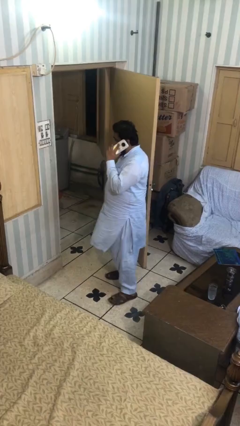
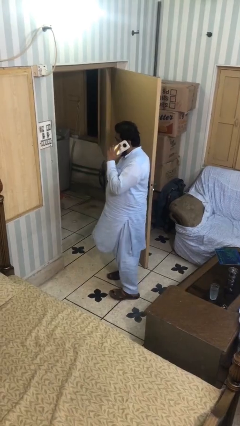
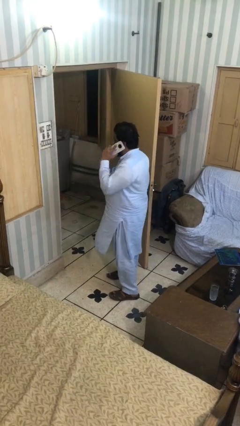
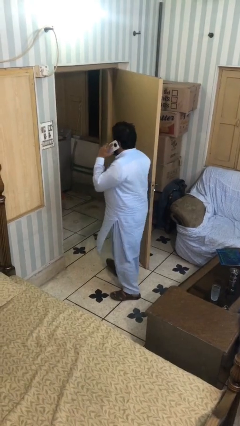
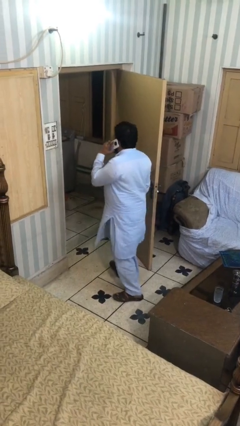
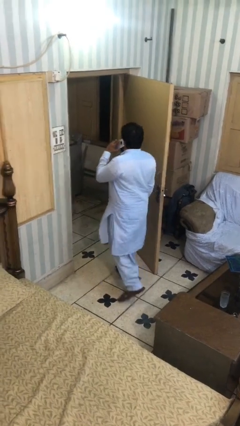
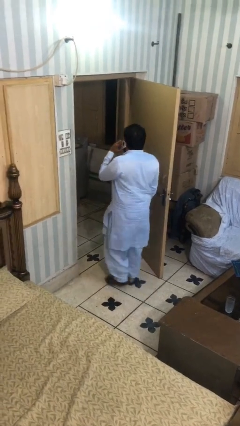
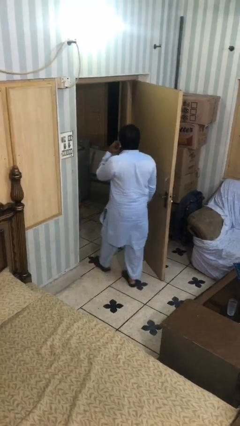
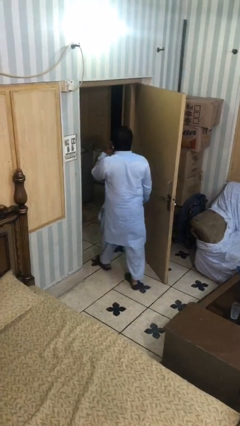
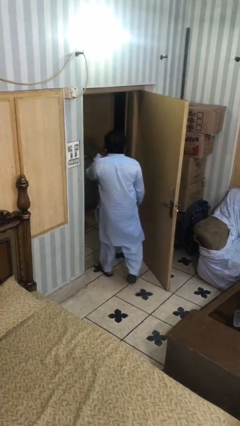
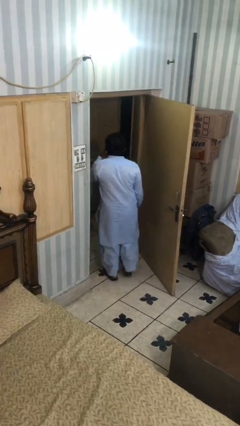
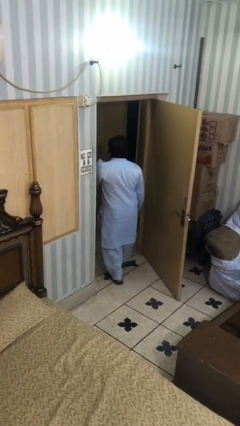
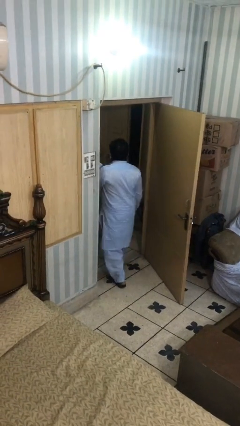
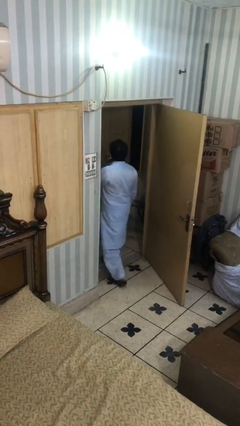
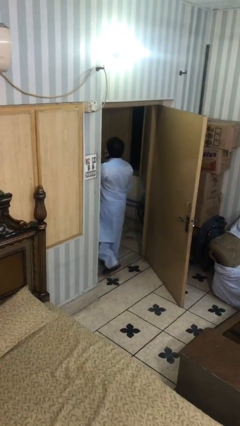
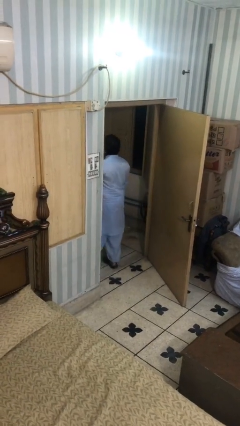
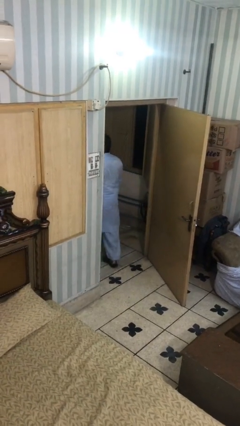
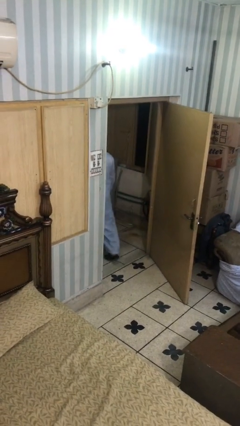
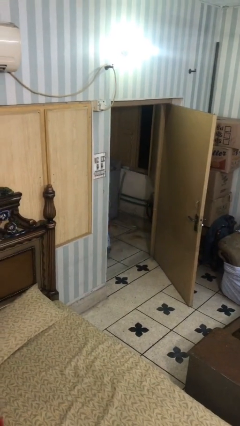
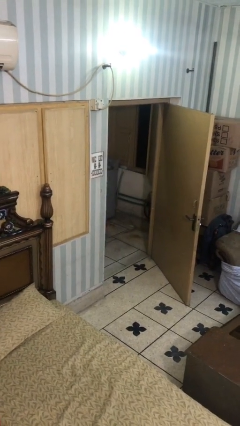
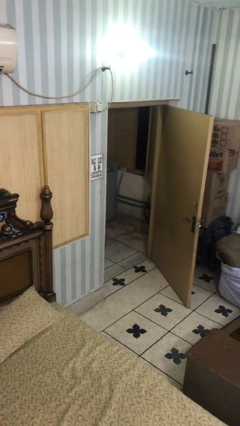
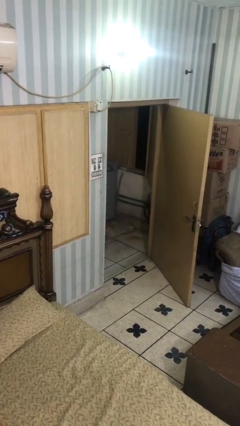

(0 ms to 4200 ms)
person exits scene through structure

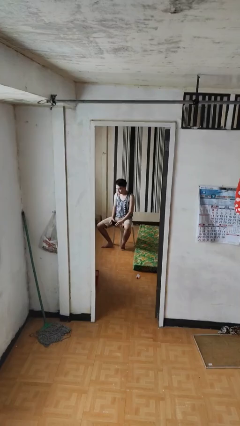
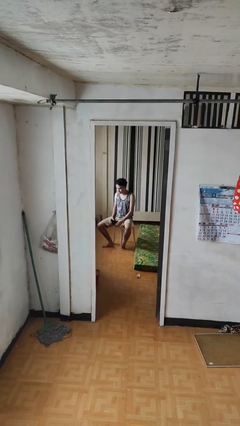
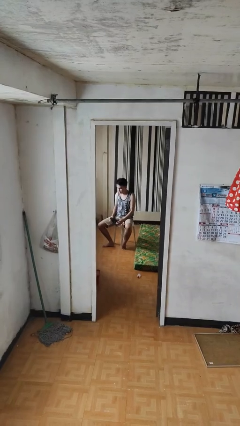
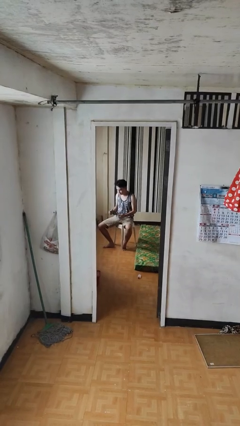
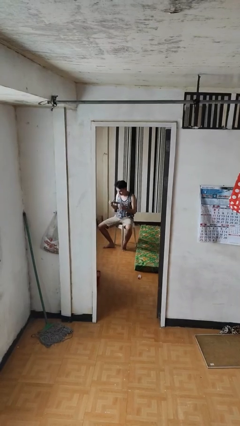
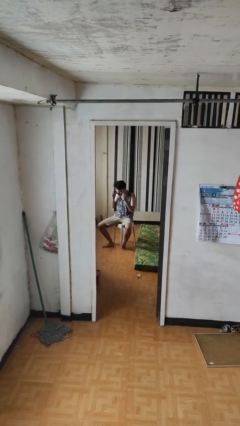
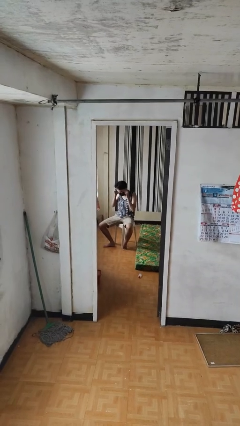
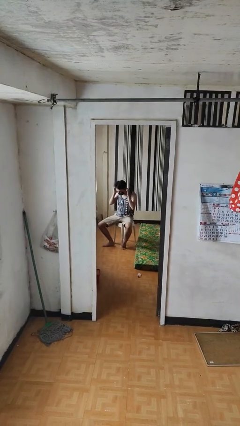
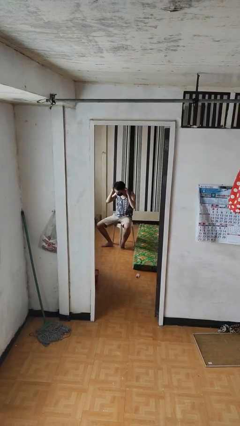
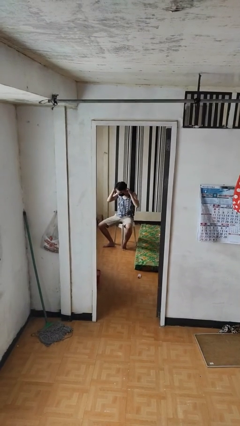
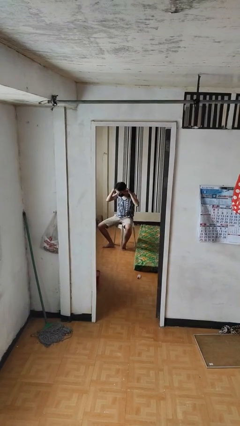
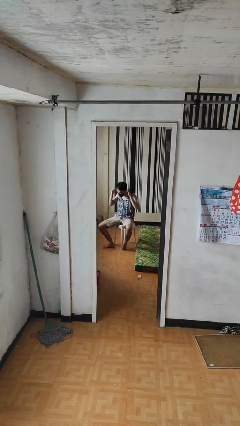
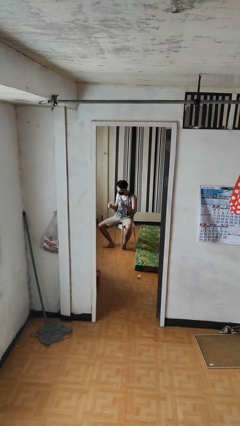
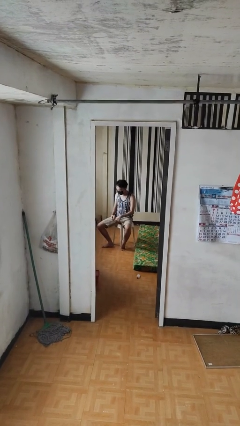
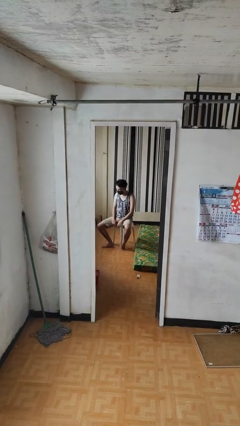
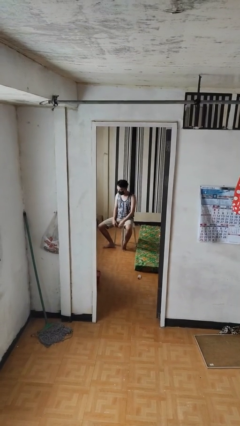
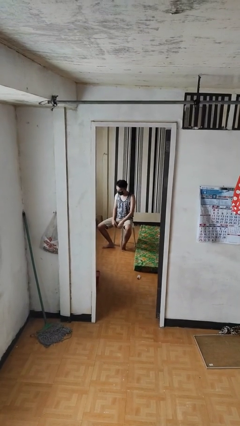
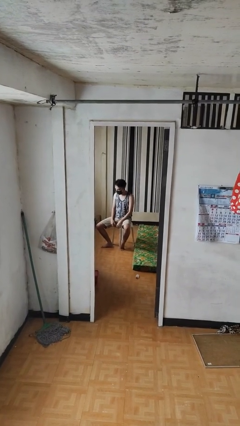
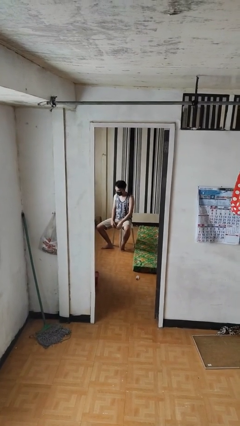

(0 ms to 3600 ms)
person puts on facemask

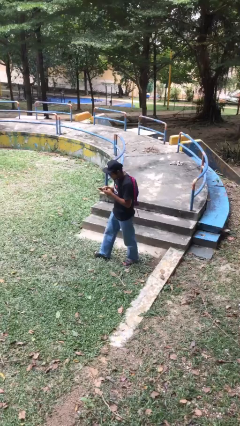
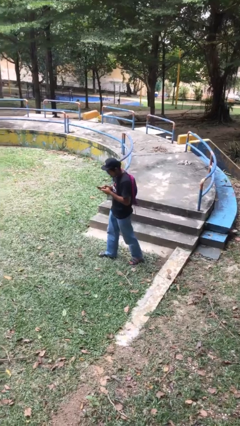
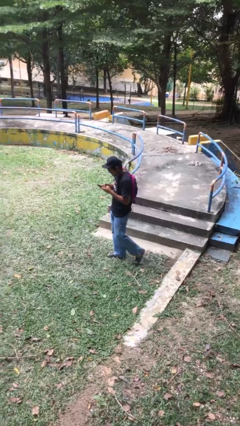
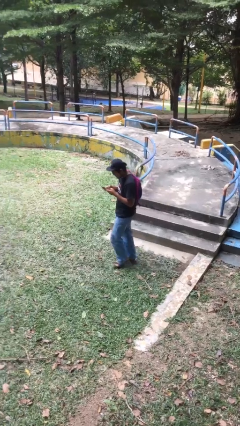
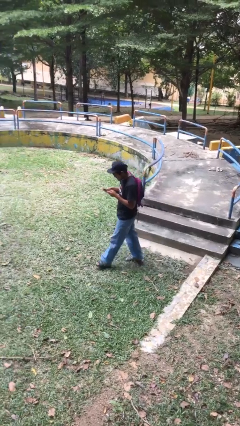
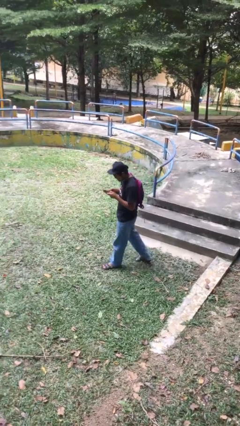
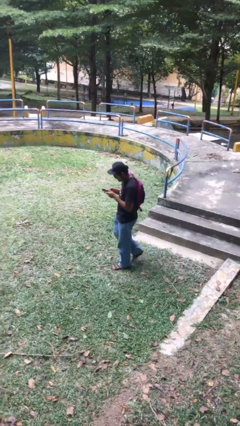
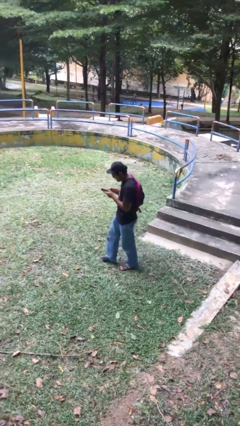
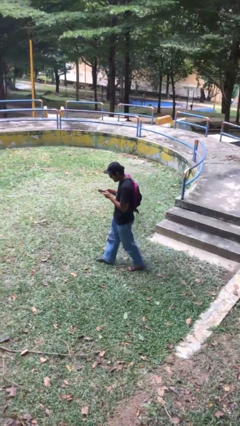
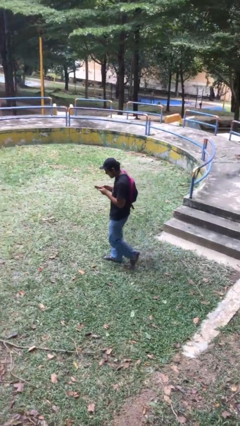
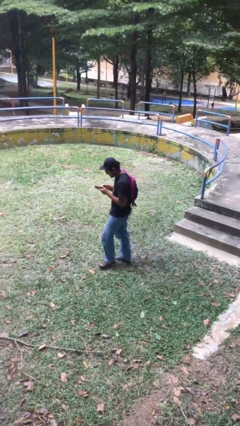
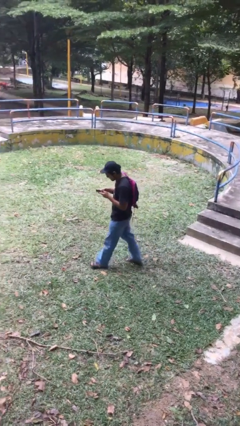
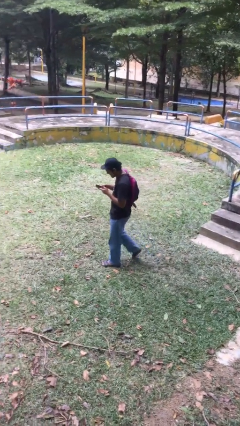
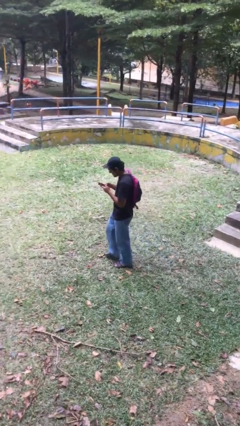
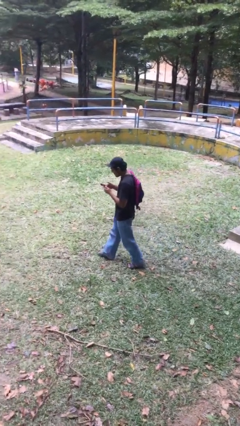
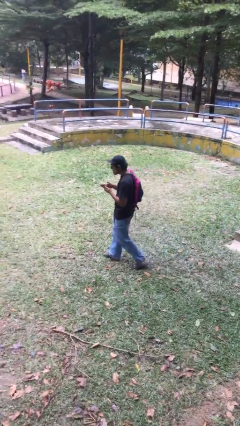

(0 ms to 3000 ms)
person texts on phone

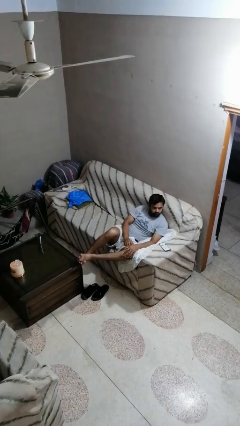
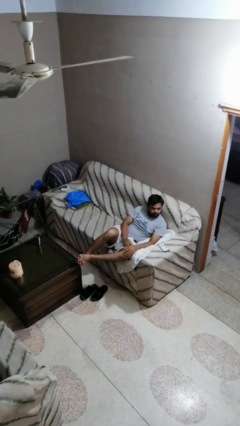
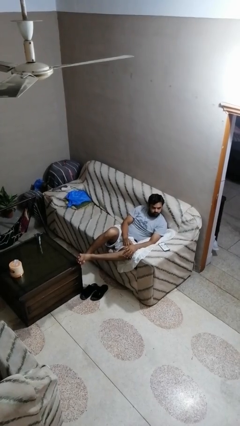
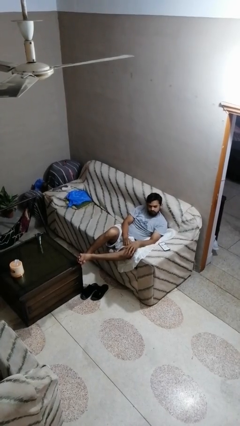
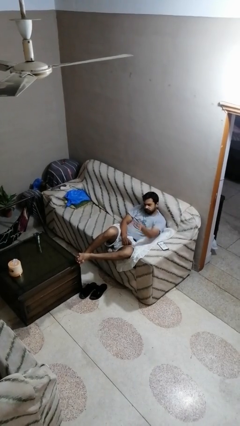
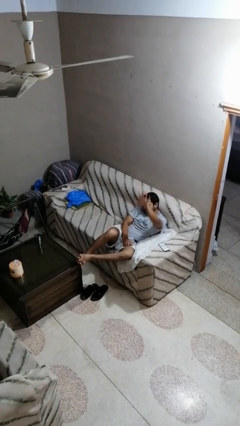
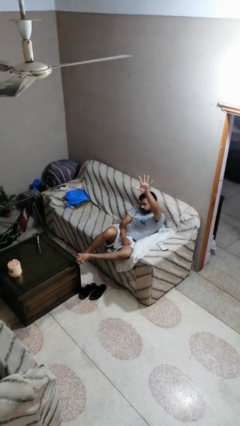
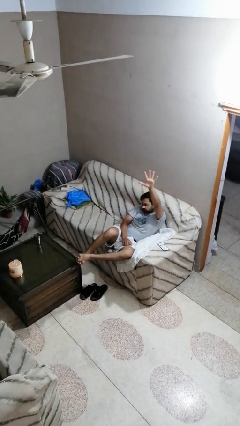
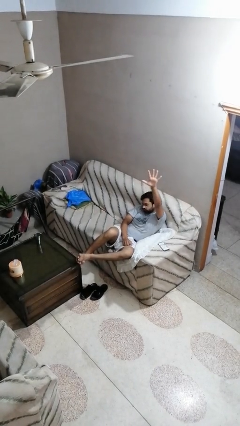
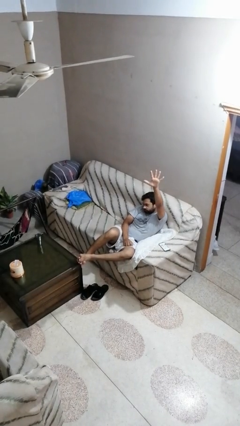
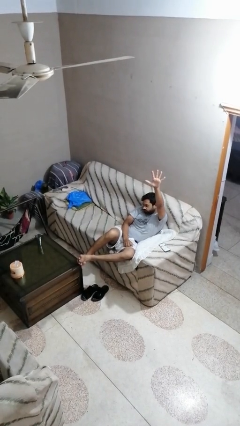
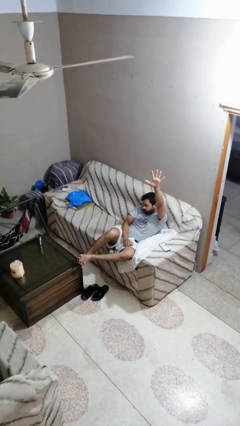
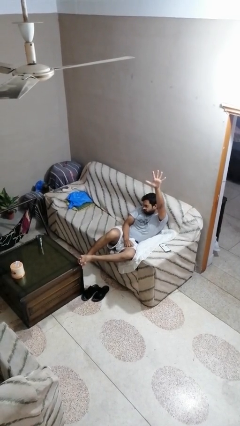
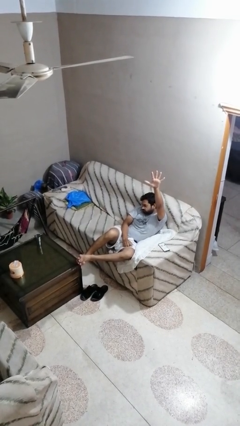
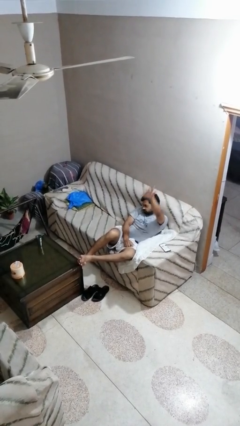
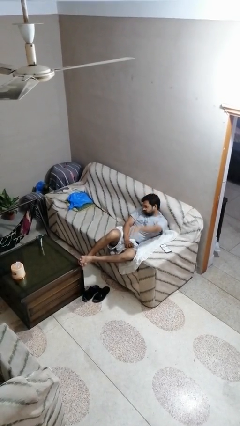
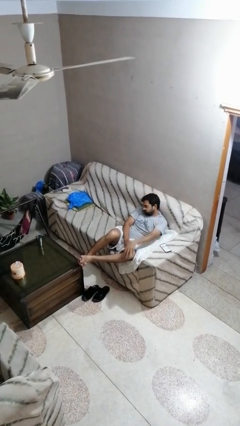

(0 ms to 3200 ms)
person gestures number five

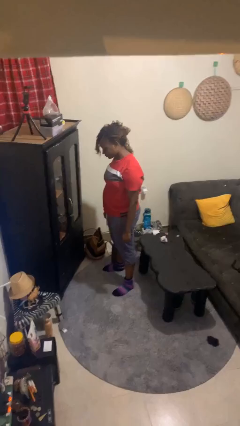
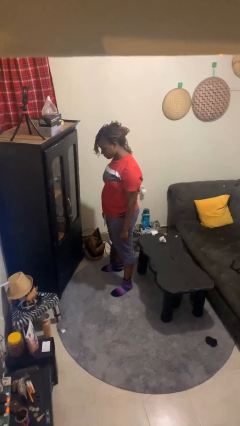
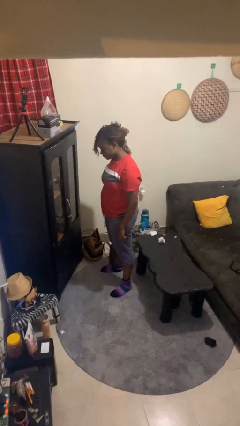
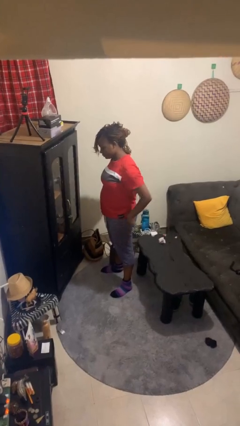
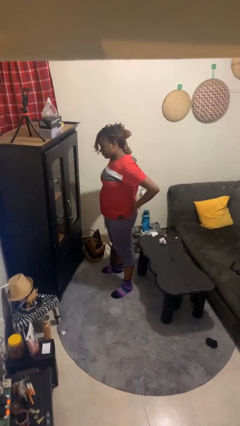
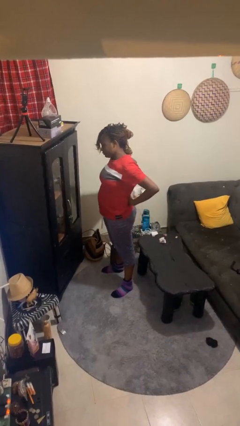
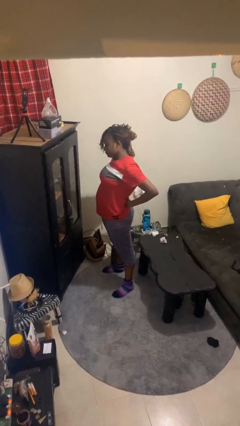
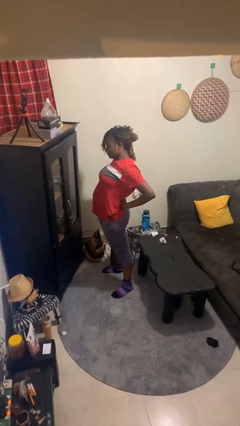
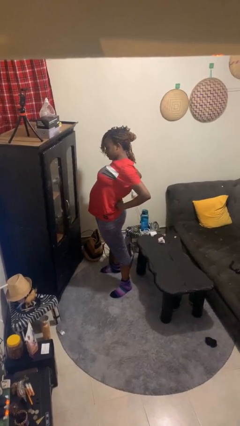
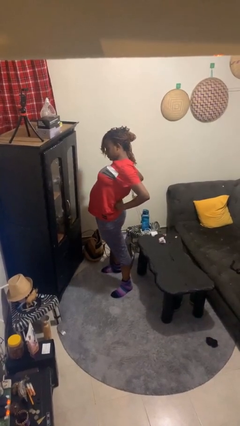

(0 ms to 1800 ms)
person stretches back

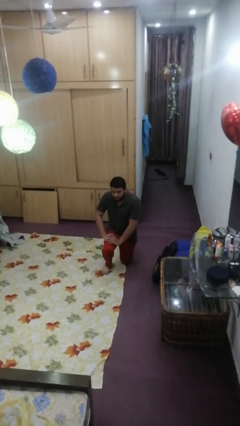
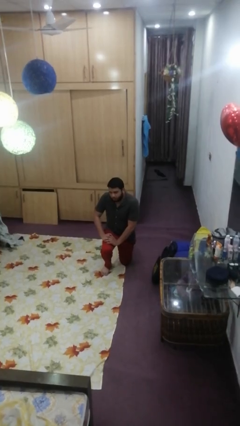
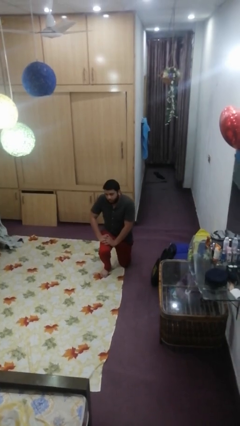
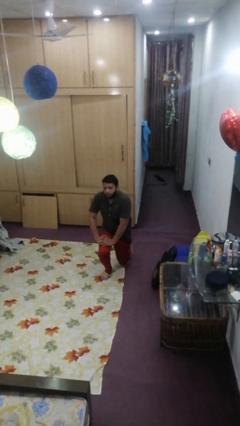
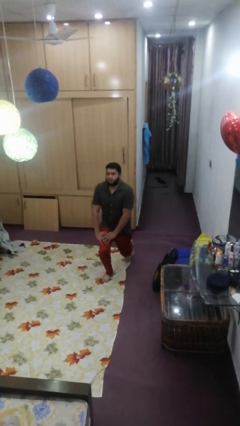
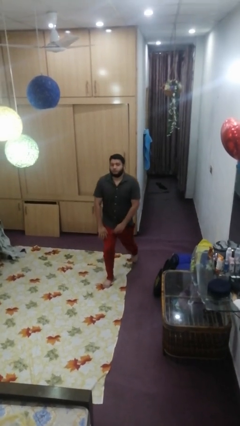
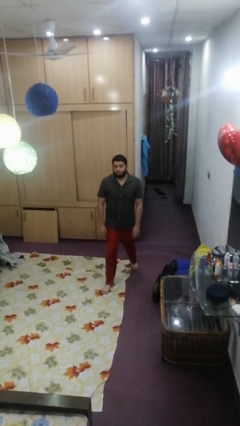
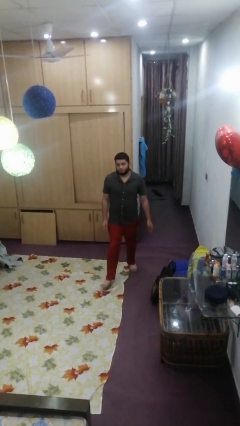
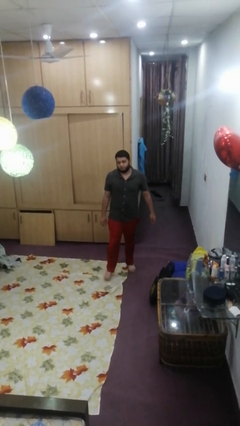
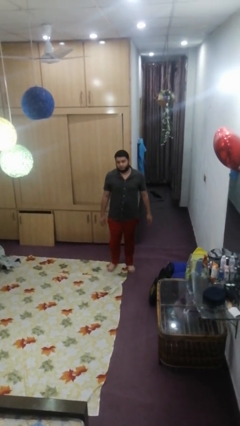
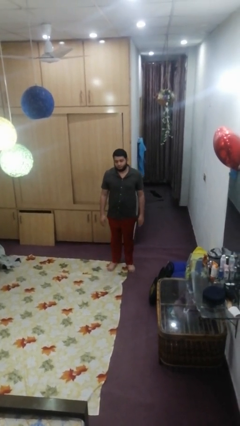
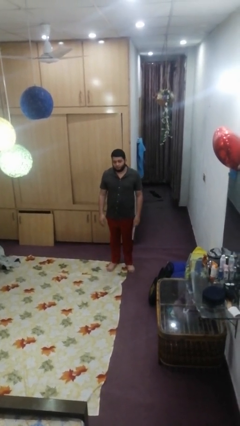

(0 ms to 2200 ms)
person stands up from floor
